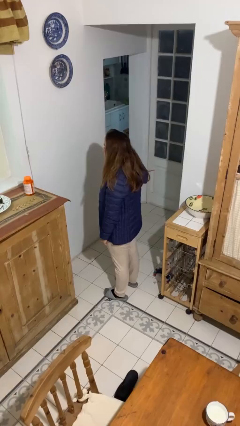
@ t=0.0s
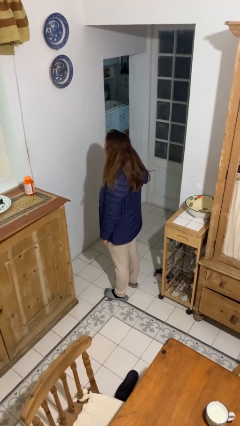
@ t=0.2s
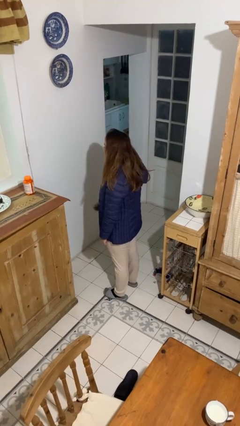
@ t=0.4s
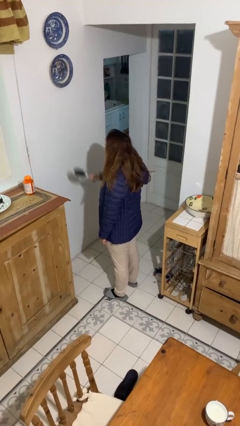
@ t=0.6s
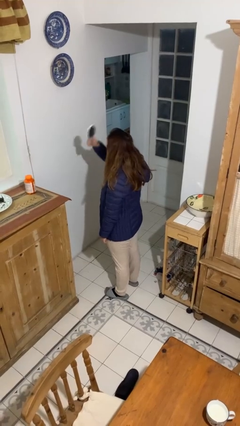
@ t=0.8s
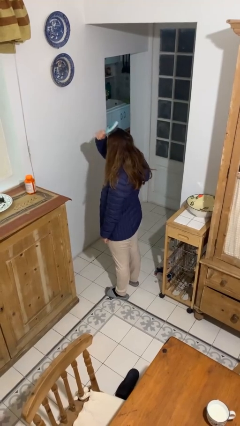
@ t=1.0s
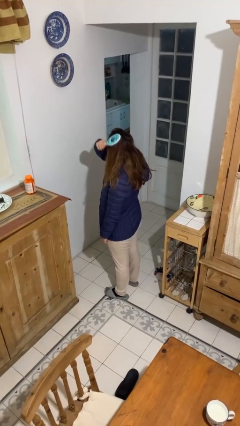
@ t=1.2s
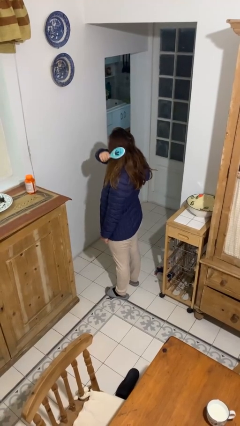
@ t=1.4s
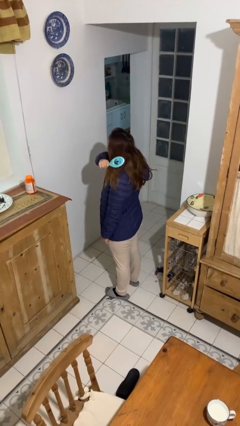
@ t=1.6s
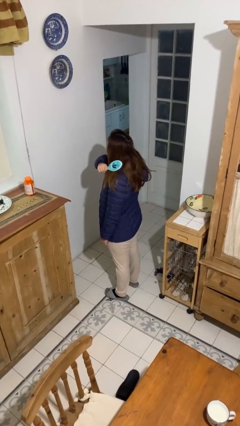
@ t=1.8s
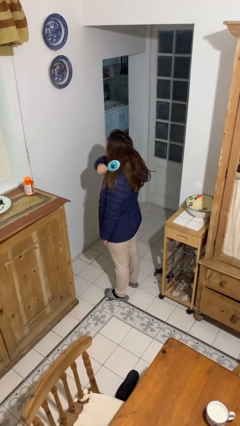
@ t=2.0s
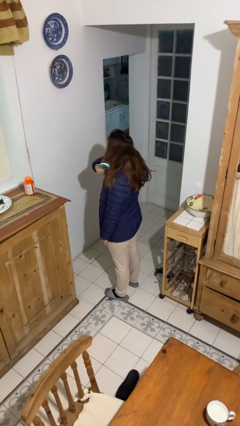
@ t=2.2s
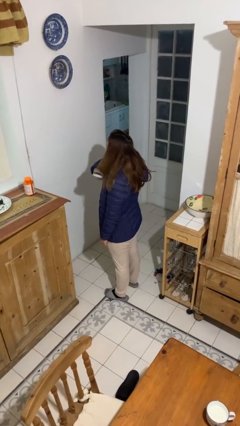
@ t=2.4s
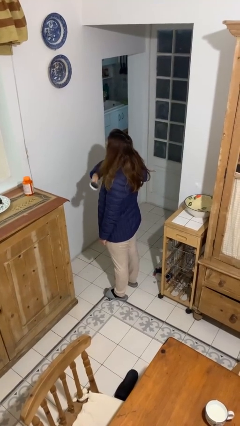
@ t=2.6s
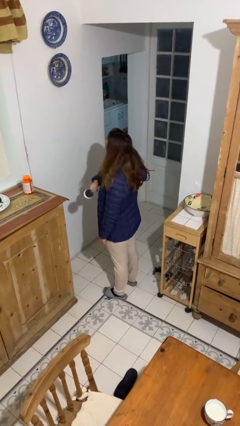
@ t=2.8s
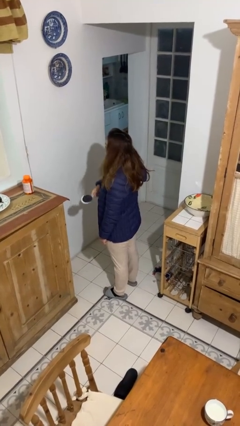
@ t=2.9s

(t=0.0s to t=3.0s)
person brushes hair

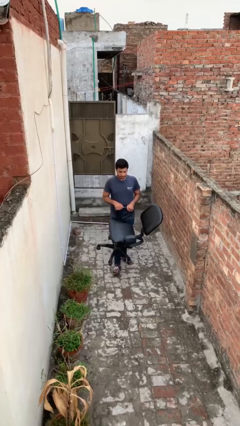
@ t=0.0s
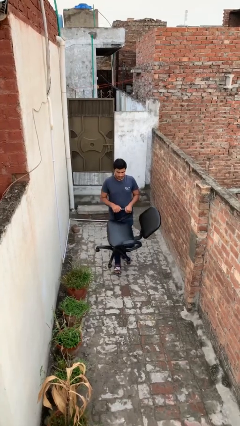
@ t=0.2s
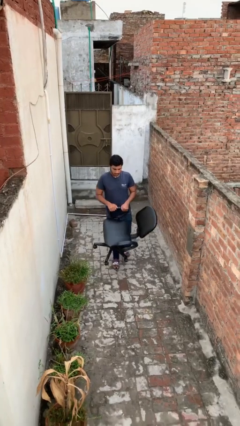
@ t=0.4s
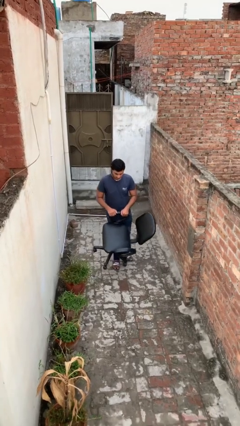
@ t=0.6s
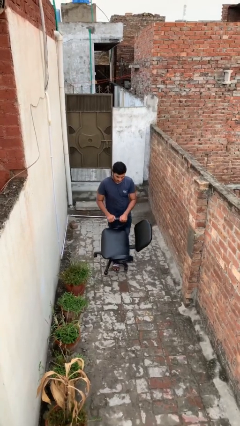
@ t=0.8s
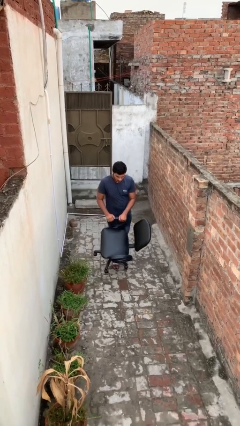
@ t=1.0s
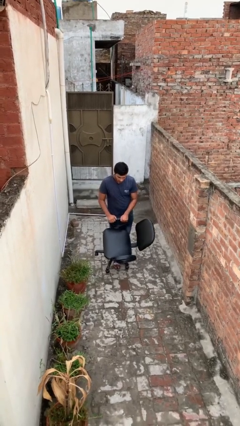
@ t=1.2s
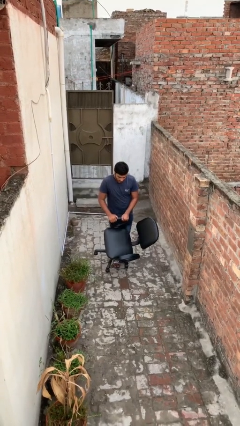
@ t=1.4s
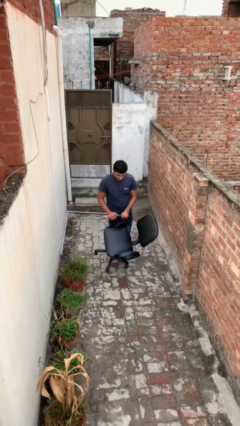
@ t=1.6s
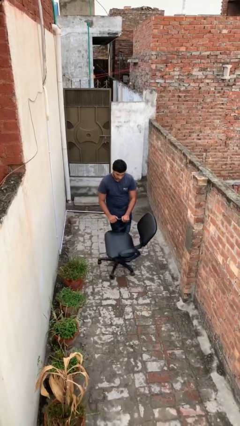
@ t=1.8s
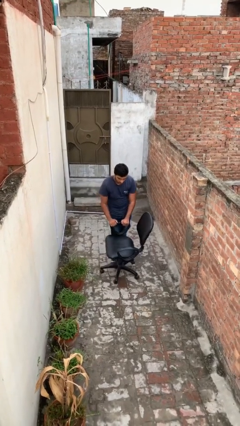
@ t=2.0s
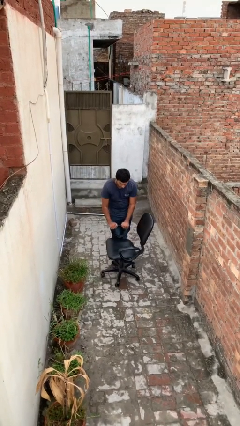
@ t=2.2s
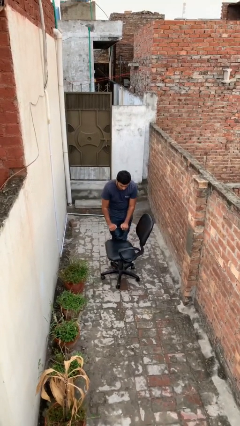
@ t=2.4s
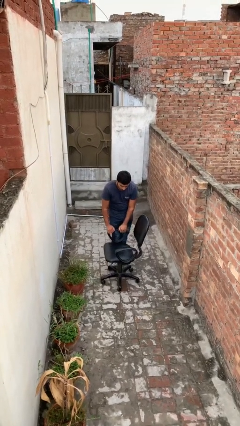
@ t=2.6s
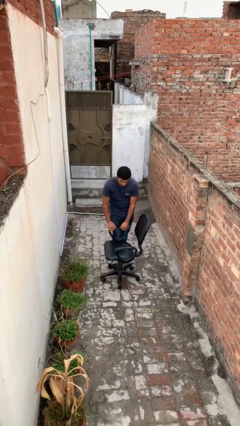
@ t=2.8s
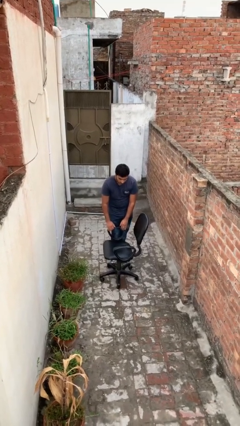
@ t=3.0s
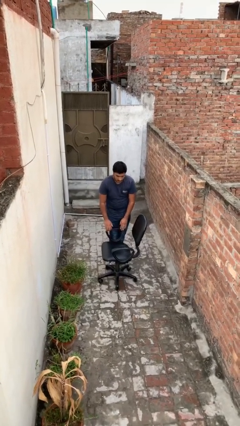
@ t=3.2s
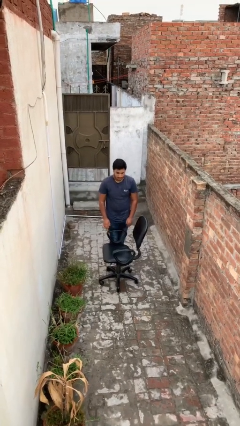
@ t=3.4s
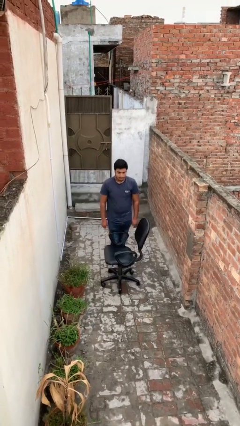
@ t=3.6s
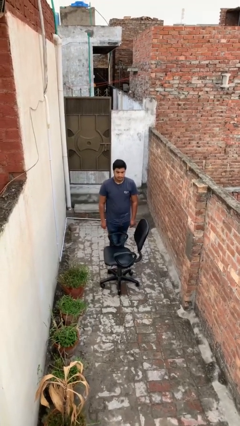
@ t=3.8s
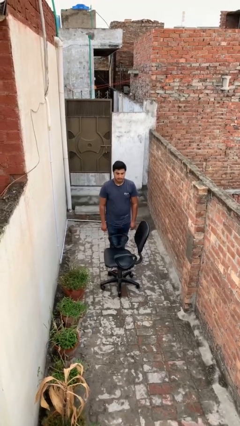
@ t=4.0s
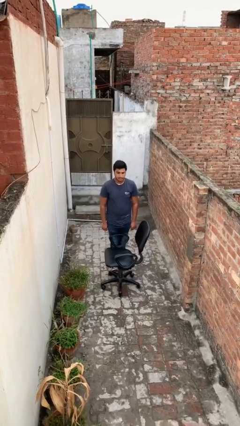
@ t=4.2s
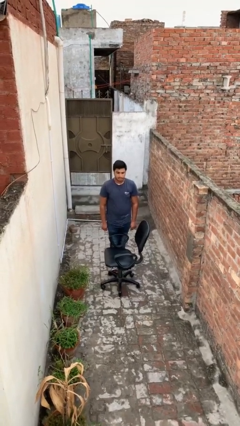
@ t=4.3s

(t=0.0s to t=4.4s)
person puts down object on floor

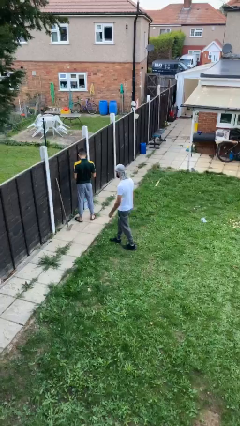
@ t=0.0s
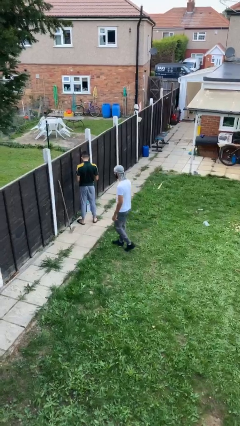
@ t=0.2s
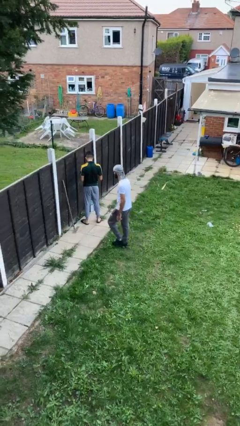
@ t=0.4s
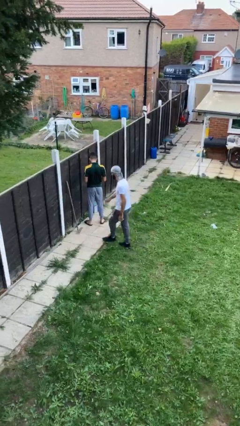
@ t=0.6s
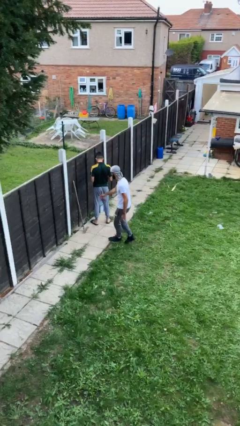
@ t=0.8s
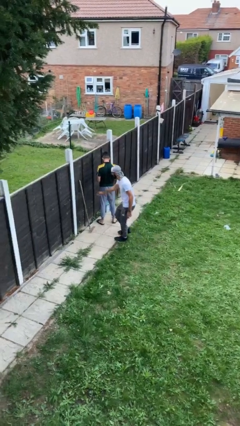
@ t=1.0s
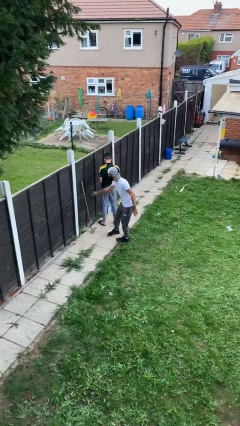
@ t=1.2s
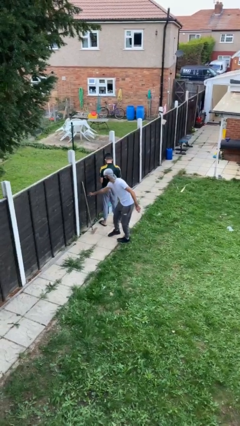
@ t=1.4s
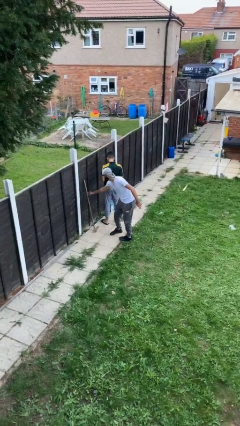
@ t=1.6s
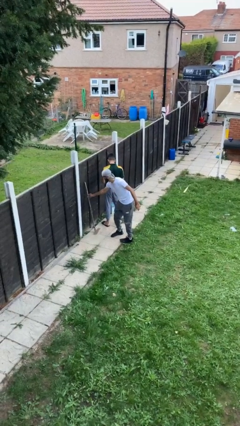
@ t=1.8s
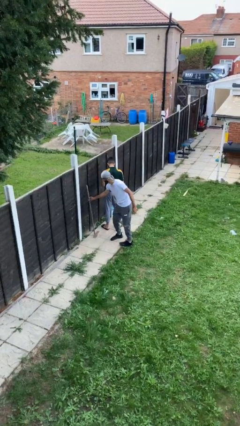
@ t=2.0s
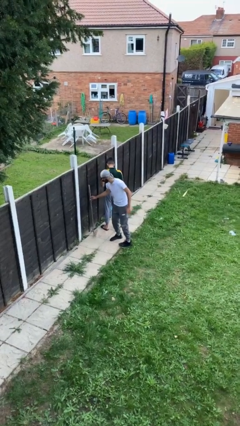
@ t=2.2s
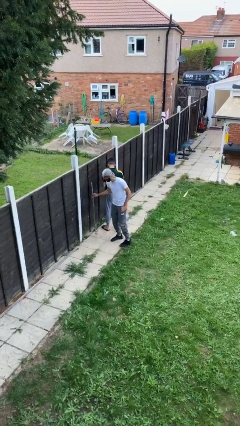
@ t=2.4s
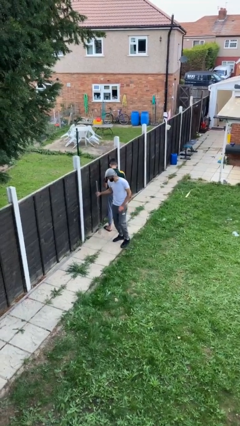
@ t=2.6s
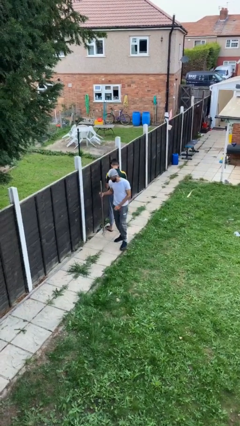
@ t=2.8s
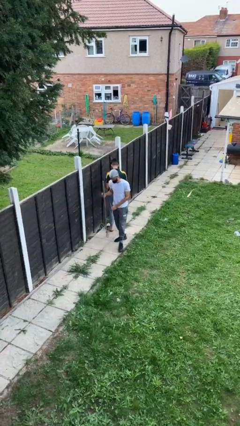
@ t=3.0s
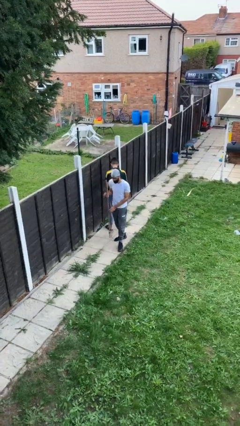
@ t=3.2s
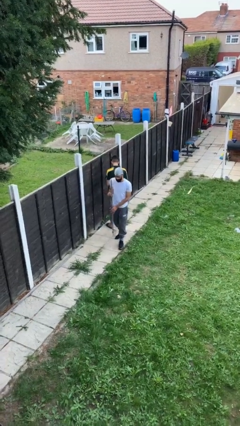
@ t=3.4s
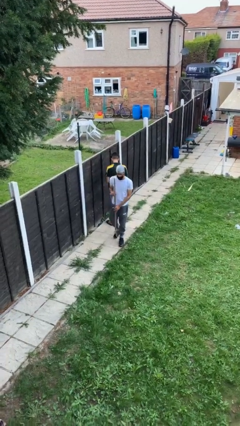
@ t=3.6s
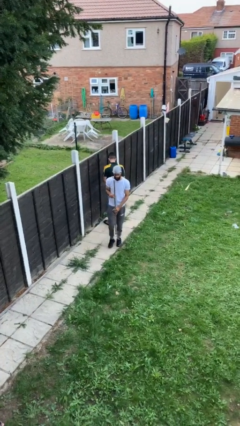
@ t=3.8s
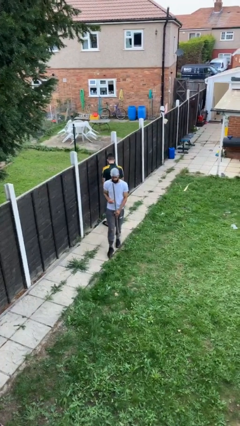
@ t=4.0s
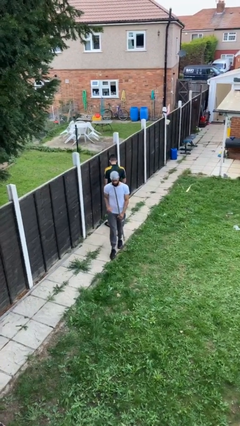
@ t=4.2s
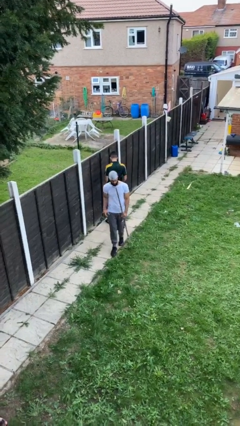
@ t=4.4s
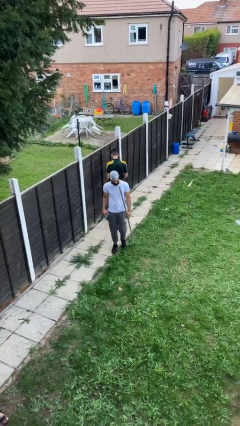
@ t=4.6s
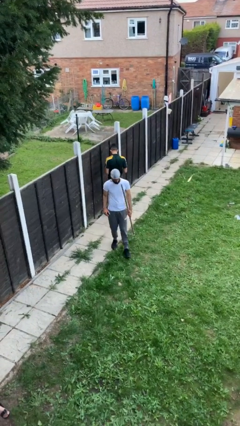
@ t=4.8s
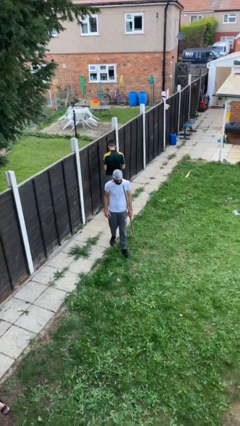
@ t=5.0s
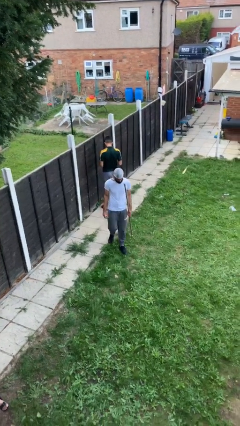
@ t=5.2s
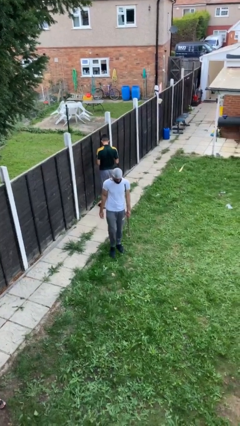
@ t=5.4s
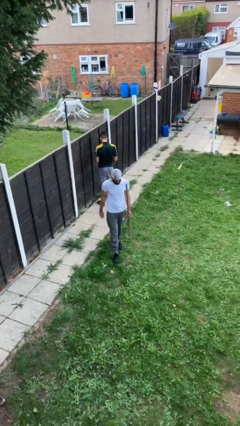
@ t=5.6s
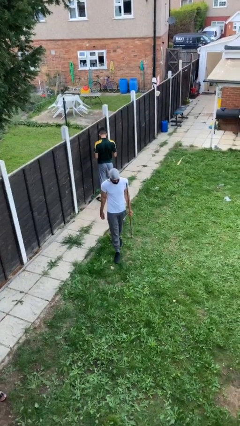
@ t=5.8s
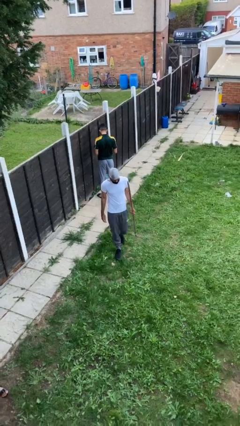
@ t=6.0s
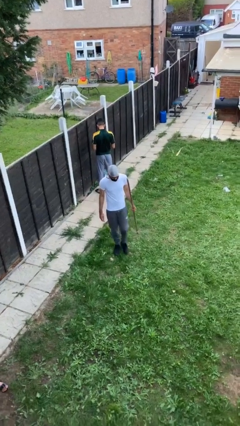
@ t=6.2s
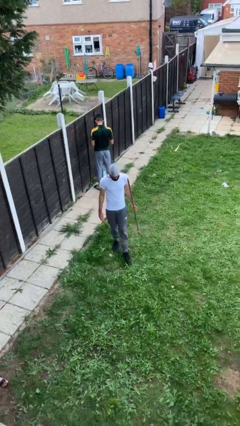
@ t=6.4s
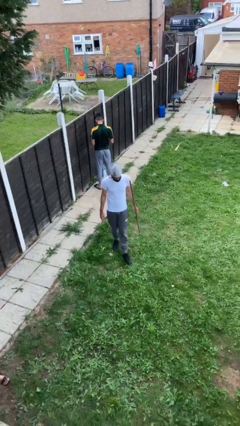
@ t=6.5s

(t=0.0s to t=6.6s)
person steals object from person

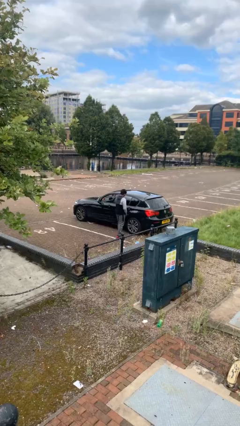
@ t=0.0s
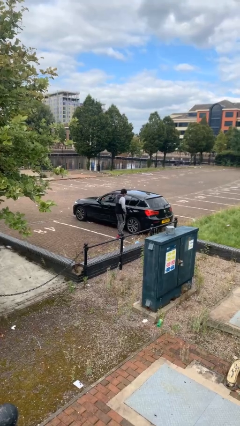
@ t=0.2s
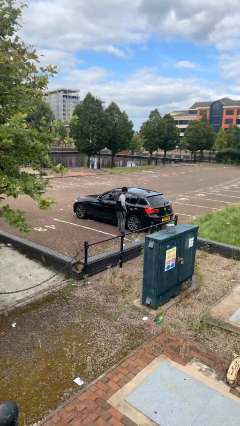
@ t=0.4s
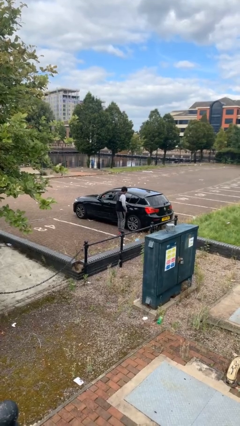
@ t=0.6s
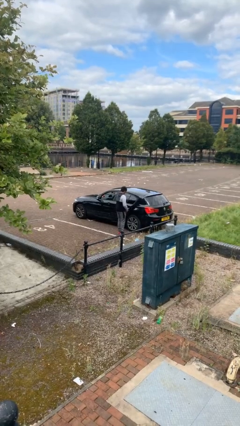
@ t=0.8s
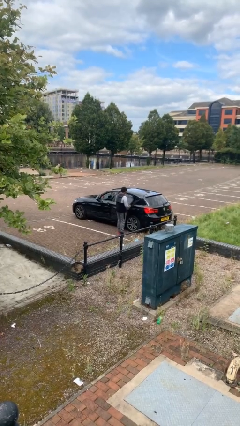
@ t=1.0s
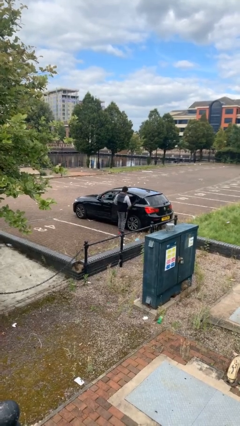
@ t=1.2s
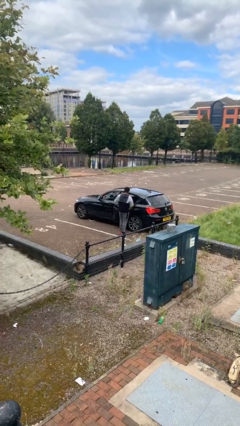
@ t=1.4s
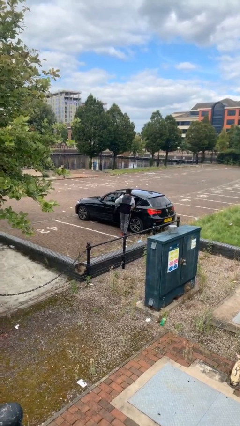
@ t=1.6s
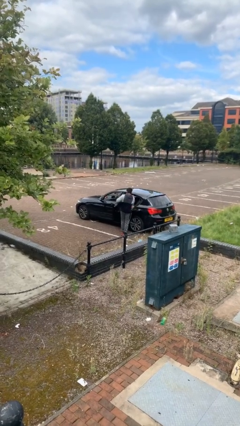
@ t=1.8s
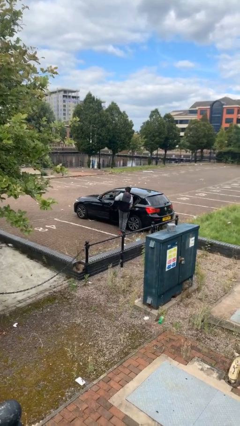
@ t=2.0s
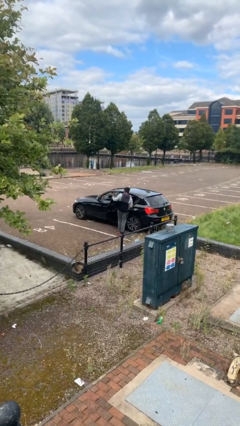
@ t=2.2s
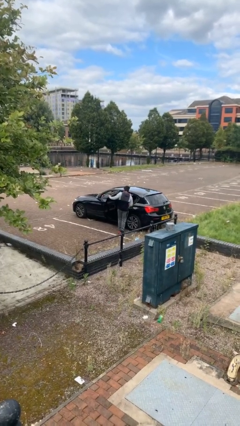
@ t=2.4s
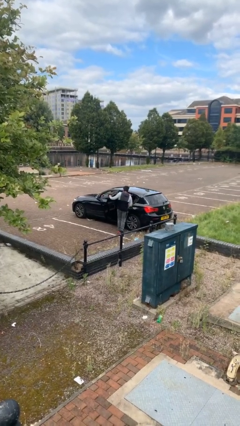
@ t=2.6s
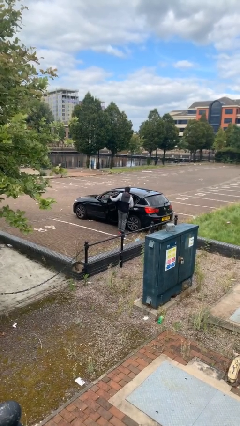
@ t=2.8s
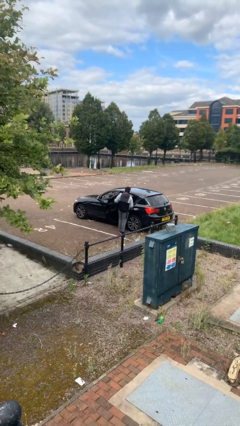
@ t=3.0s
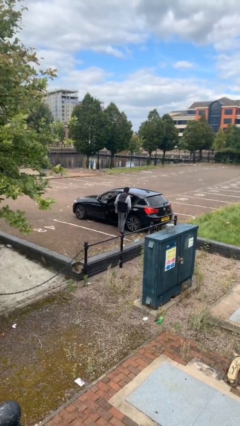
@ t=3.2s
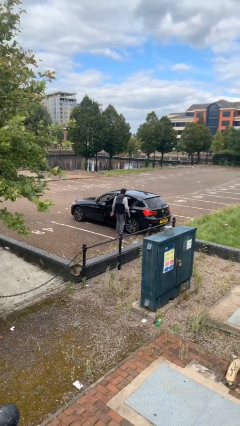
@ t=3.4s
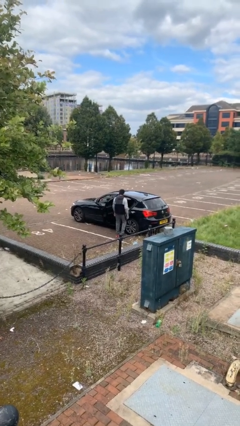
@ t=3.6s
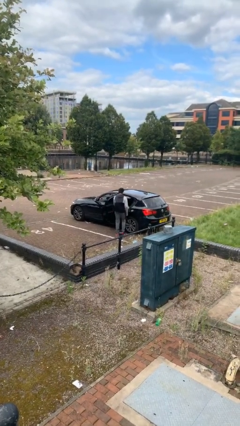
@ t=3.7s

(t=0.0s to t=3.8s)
person opens car door
